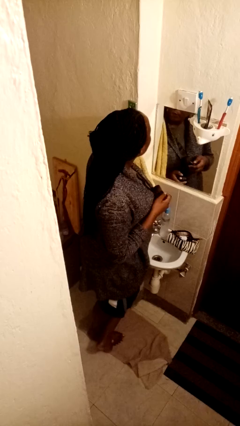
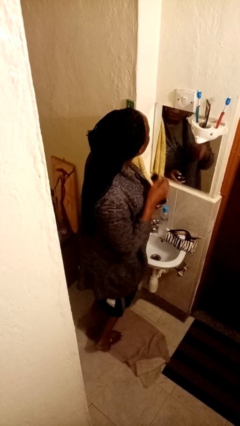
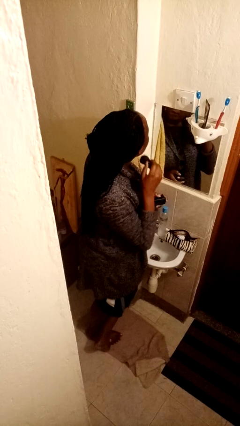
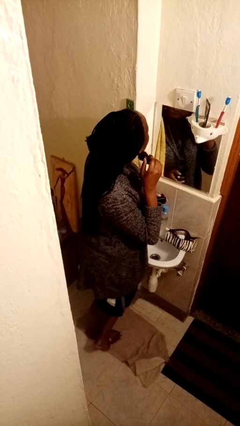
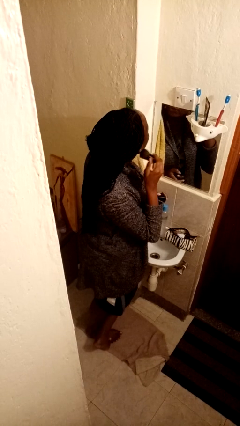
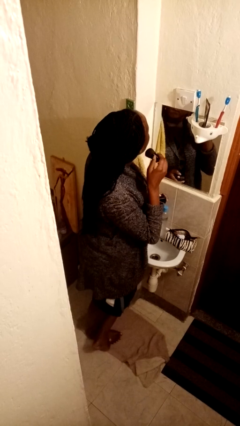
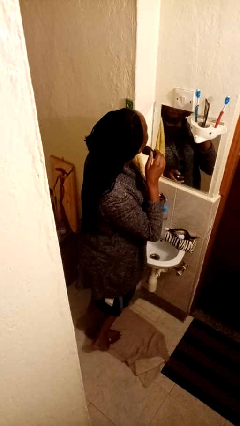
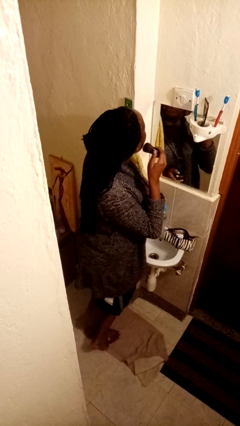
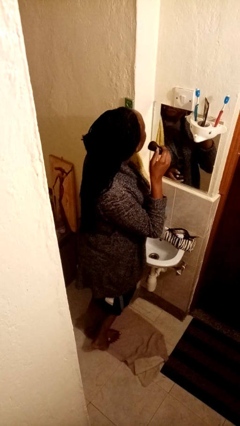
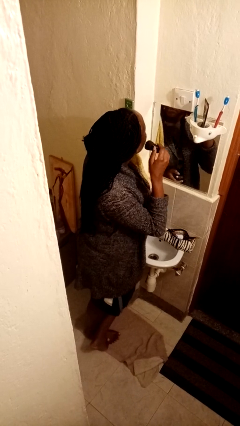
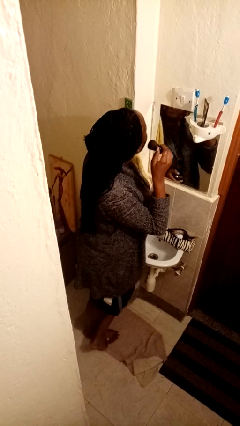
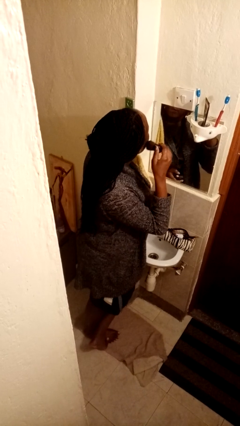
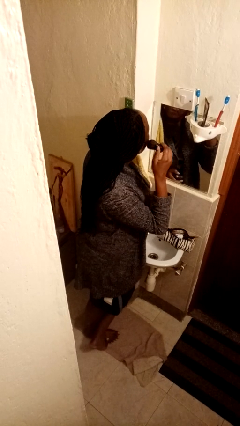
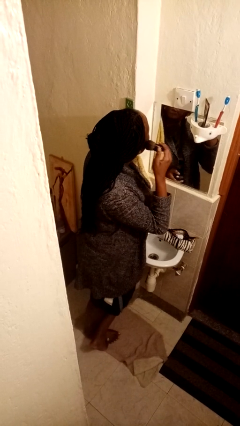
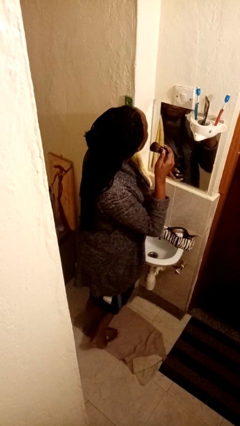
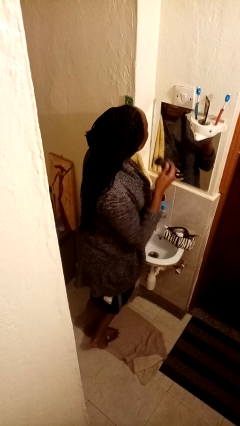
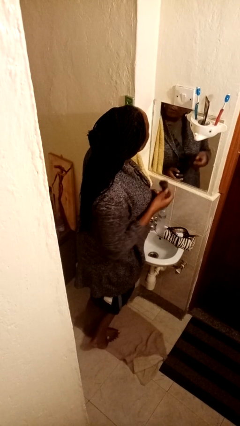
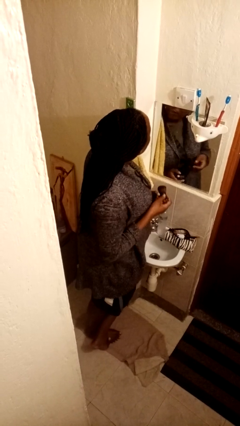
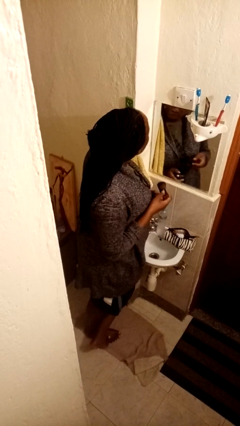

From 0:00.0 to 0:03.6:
person applies foundation makeup

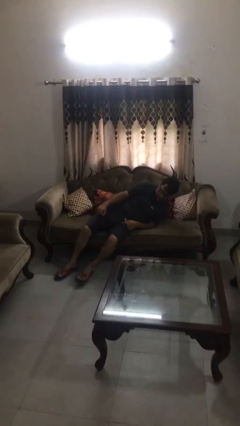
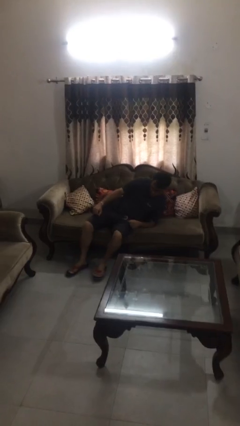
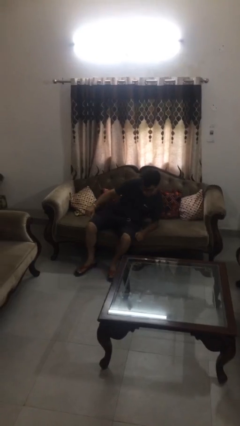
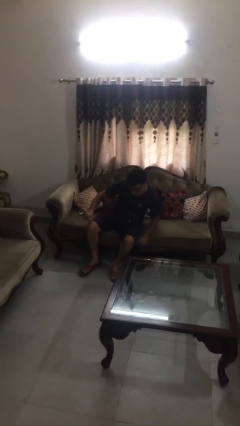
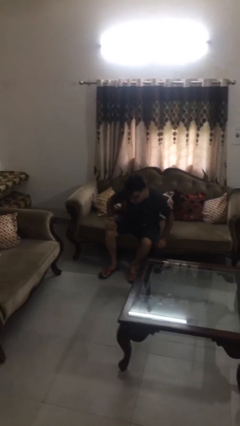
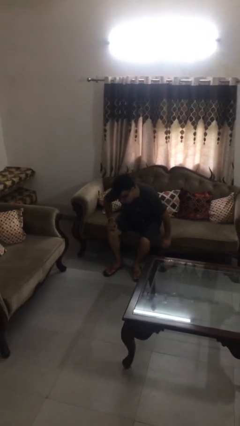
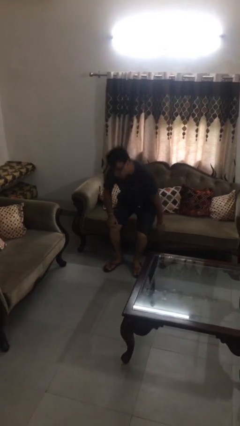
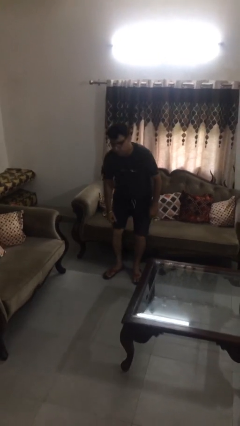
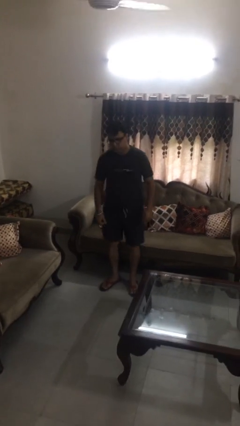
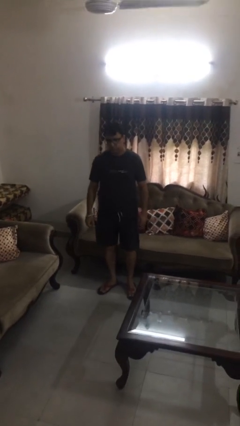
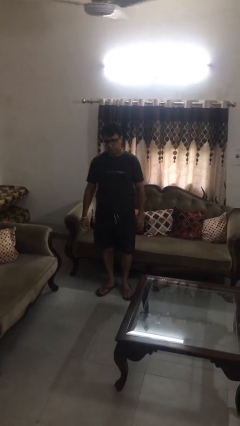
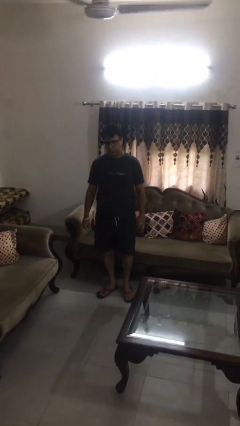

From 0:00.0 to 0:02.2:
person stands up

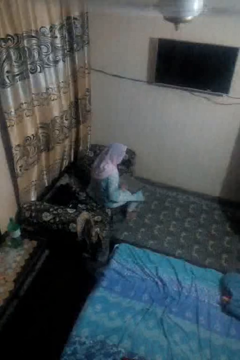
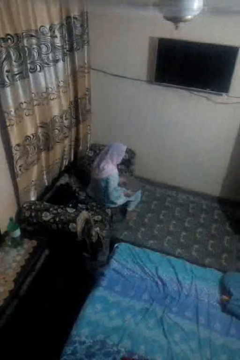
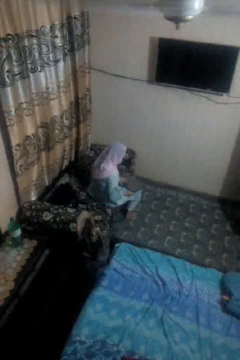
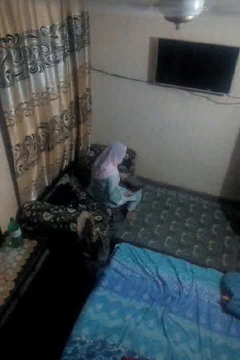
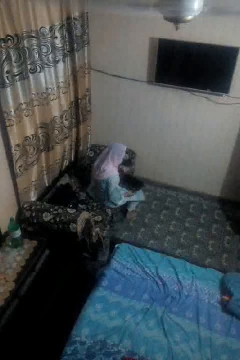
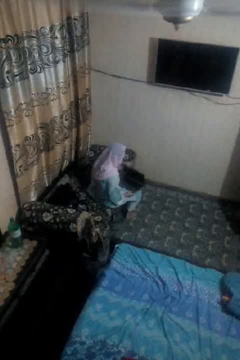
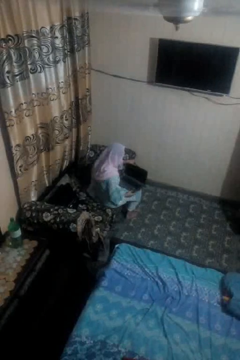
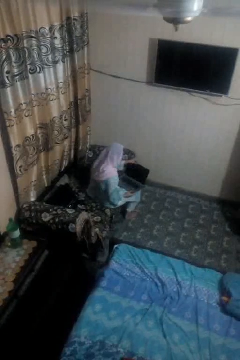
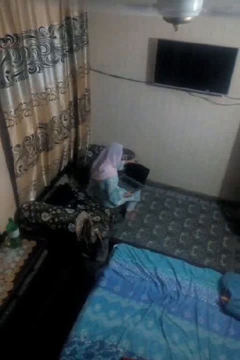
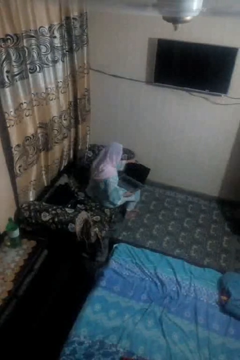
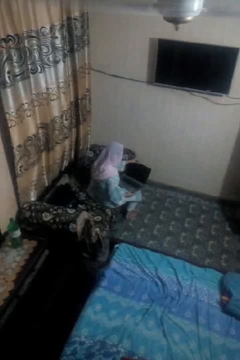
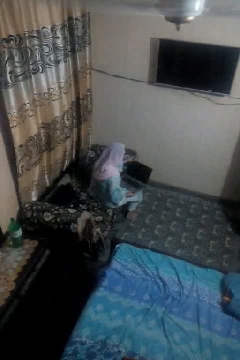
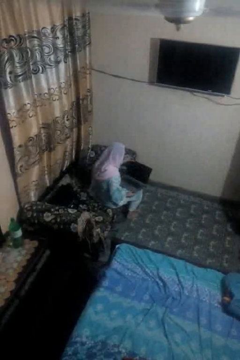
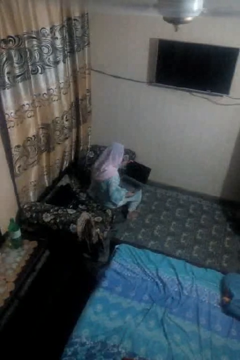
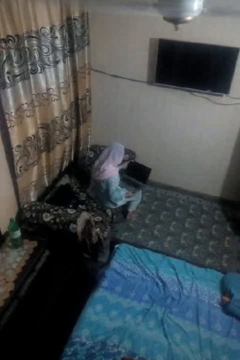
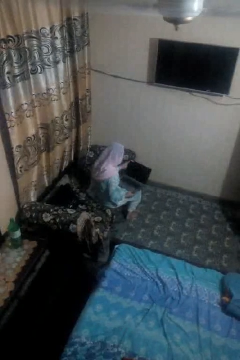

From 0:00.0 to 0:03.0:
person opens laptop

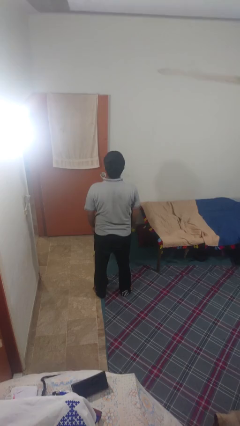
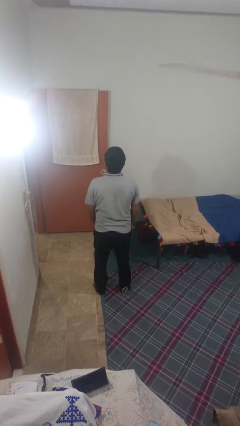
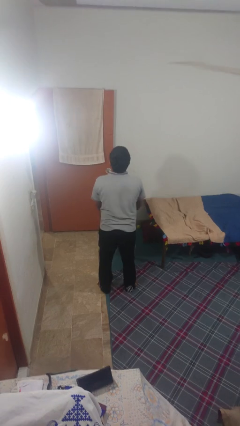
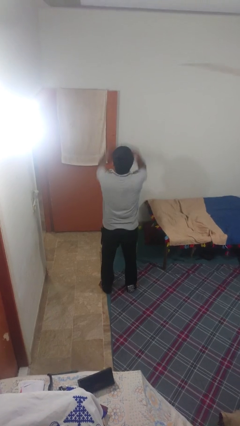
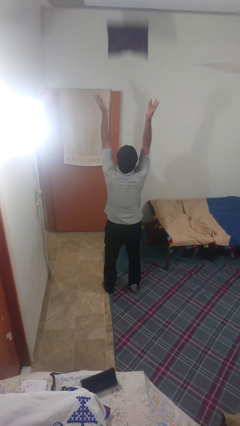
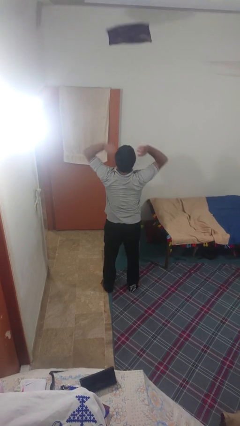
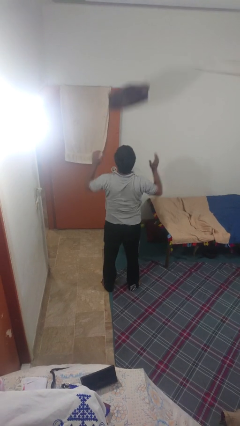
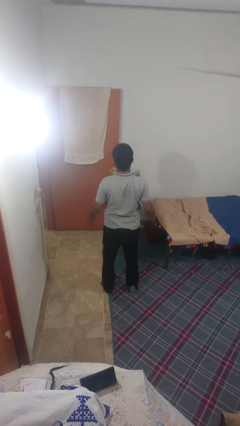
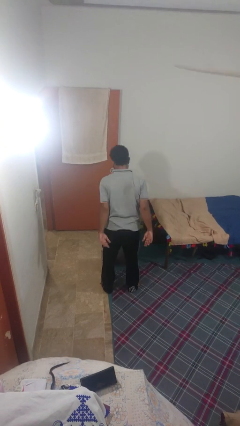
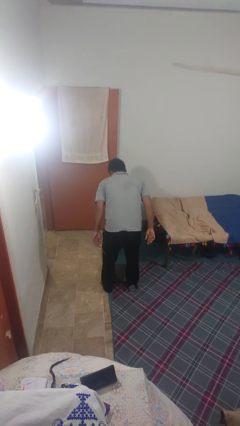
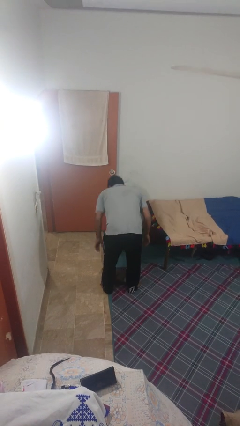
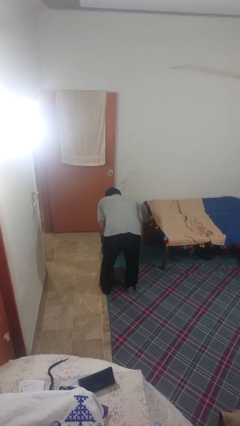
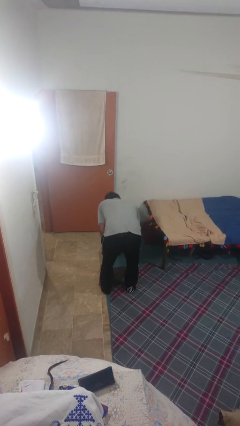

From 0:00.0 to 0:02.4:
person throws object into air

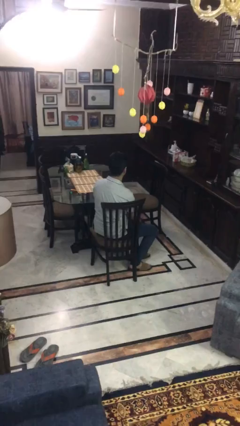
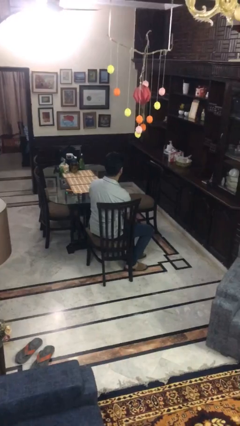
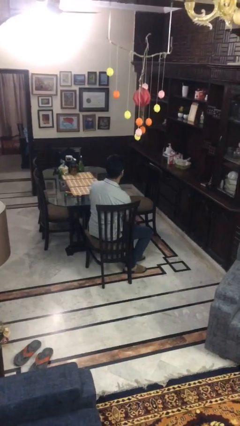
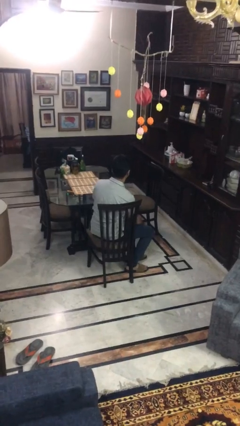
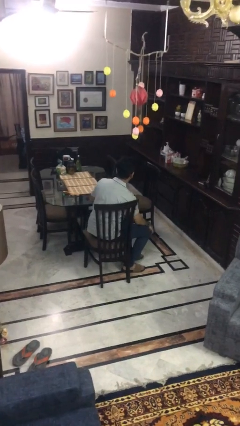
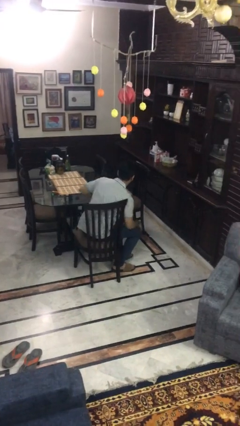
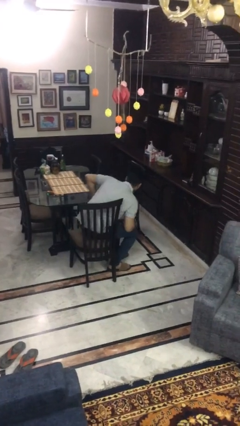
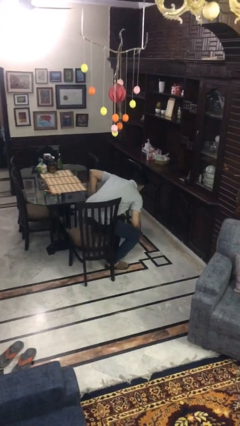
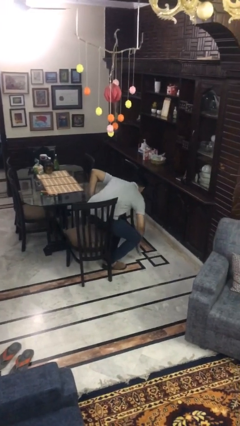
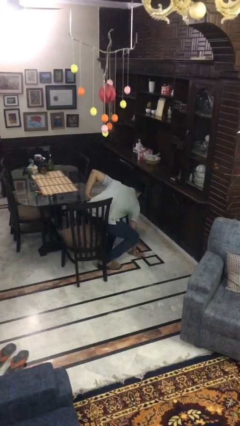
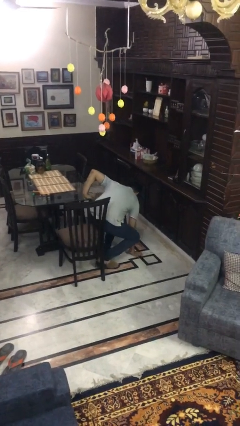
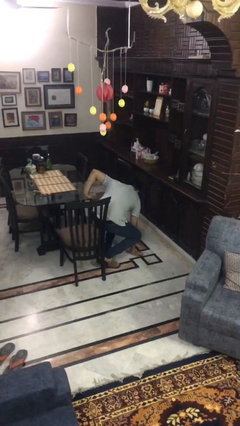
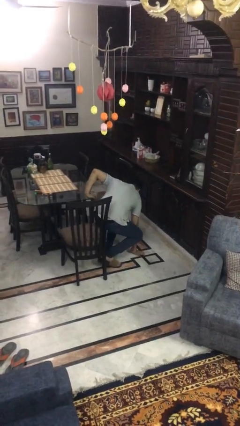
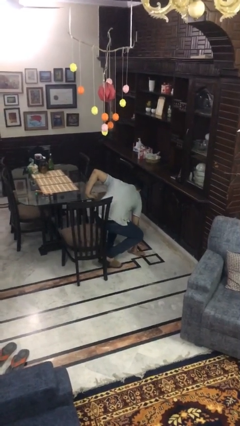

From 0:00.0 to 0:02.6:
person falls from chair

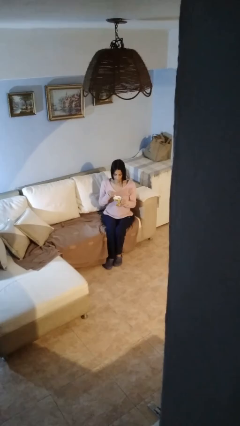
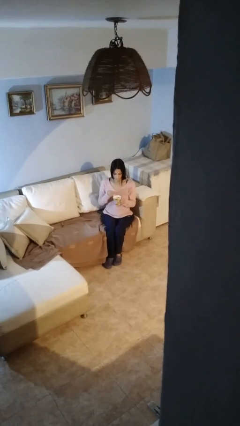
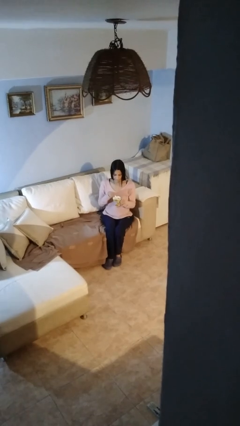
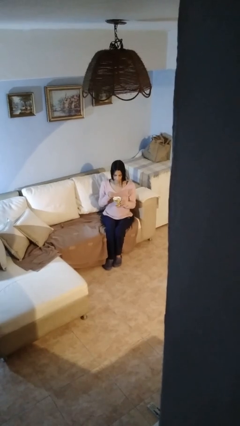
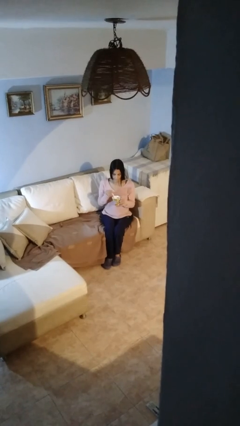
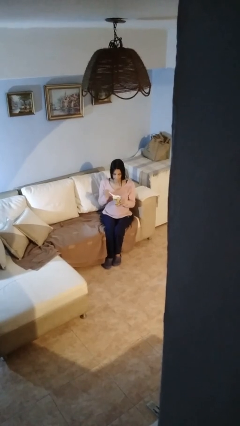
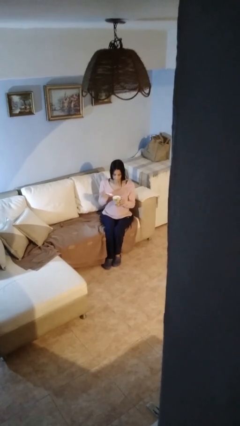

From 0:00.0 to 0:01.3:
person stirs mug

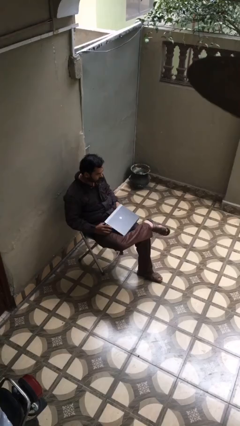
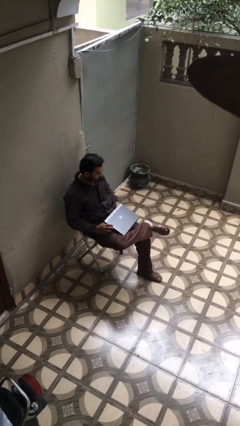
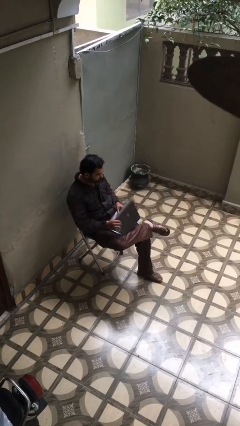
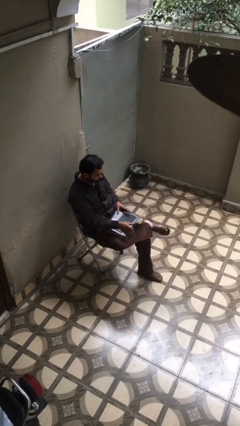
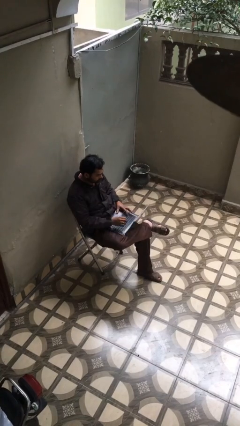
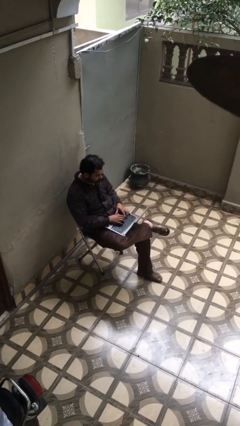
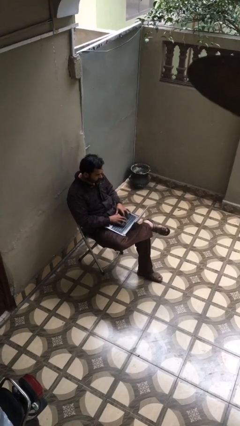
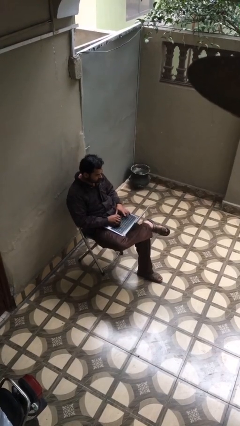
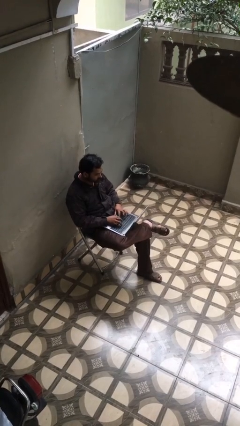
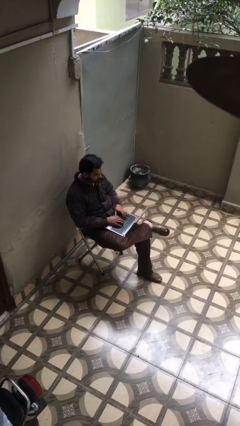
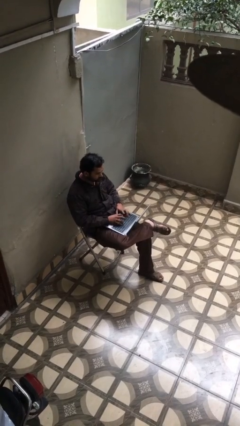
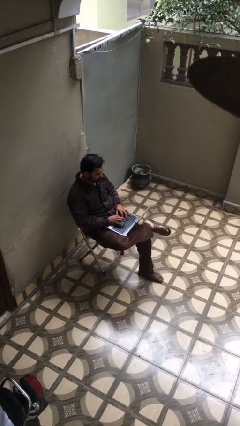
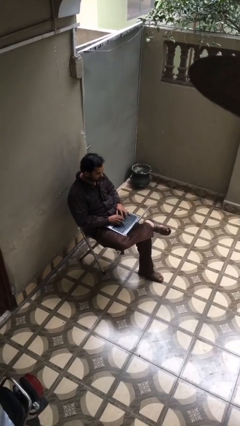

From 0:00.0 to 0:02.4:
person interacts with laptop
